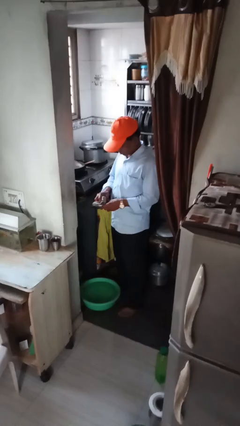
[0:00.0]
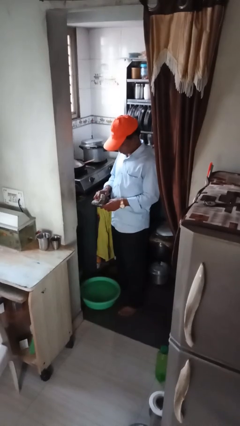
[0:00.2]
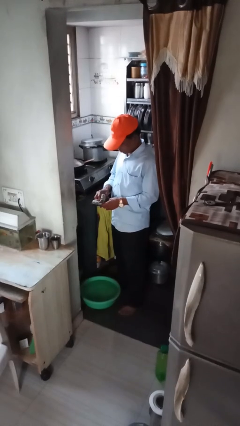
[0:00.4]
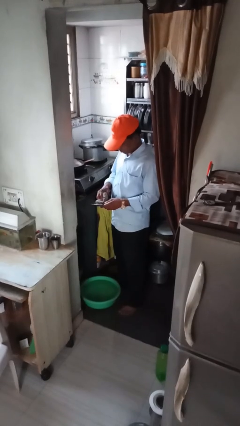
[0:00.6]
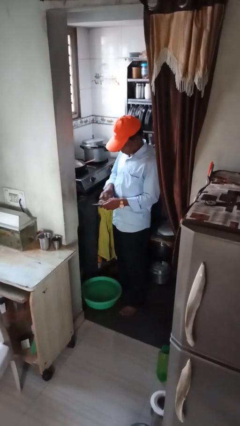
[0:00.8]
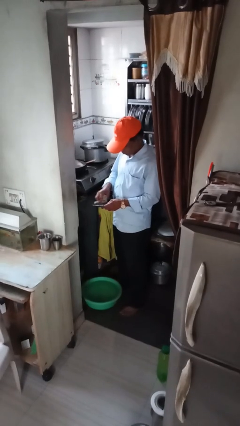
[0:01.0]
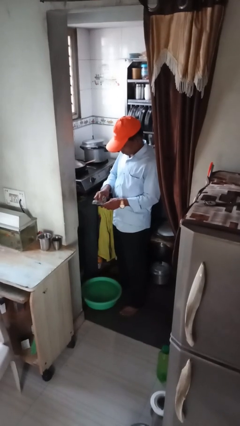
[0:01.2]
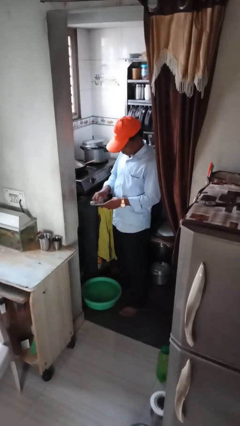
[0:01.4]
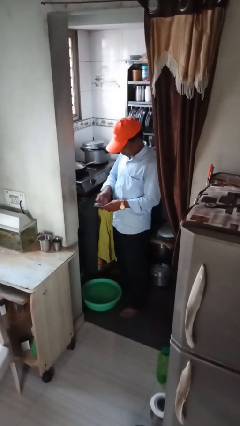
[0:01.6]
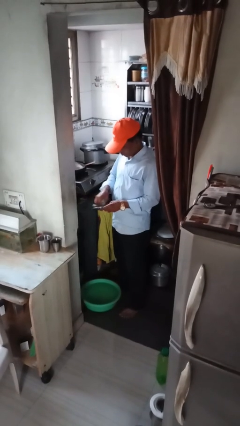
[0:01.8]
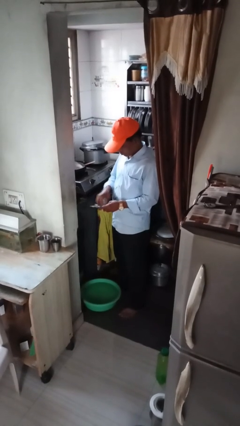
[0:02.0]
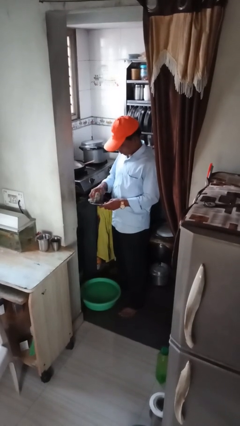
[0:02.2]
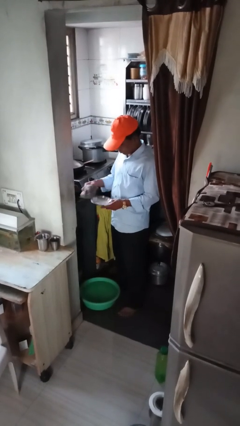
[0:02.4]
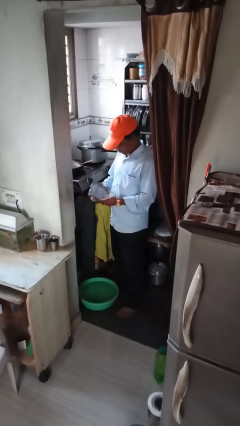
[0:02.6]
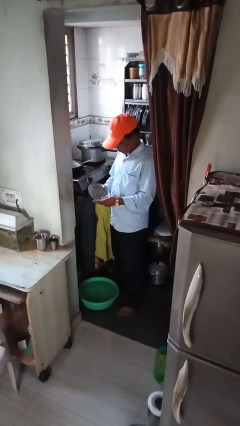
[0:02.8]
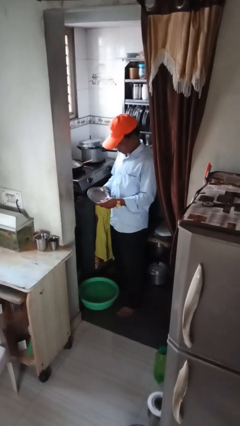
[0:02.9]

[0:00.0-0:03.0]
person dries dish

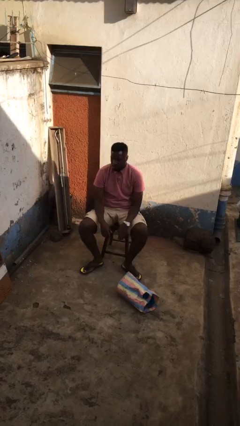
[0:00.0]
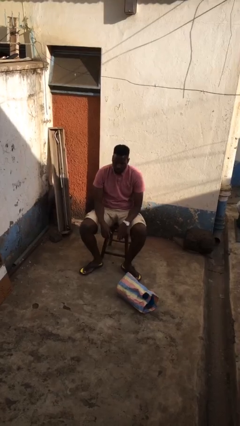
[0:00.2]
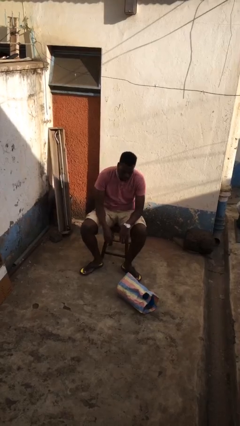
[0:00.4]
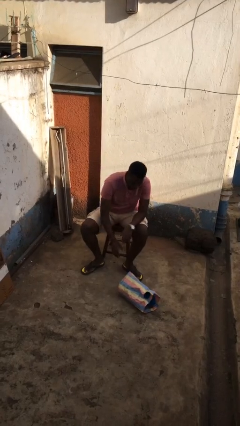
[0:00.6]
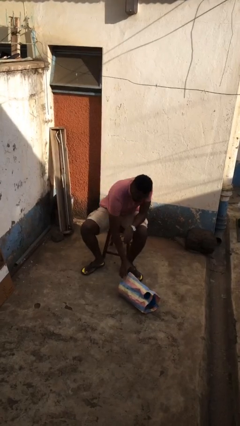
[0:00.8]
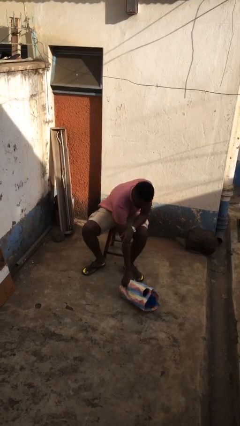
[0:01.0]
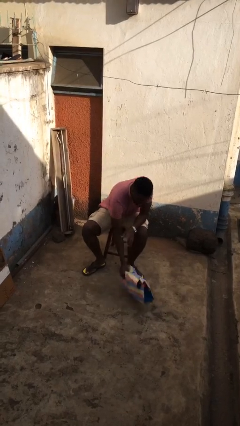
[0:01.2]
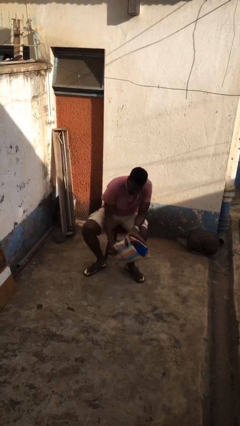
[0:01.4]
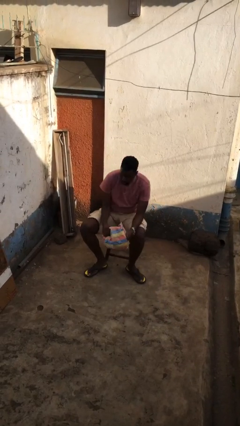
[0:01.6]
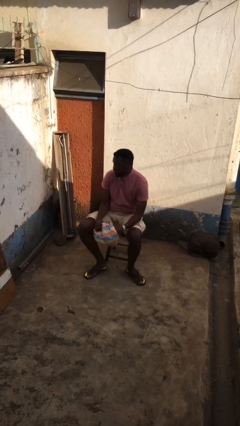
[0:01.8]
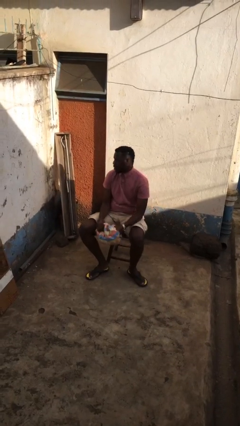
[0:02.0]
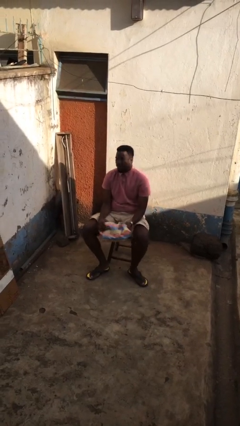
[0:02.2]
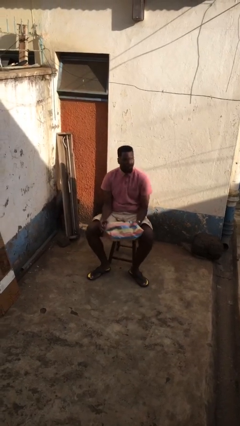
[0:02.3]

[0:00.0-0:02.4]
person picks up object from floor

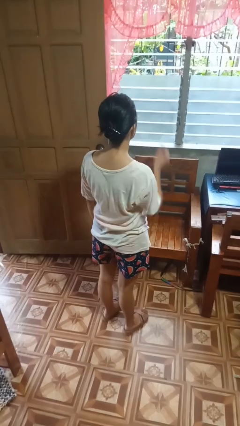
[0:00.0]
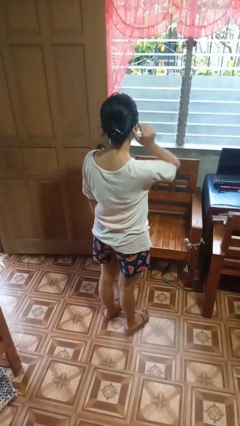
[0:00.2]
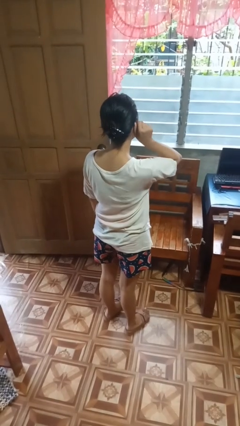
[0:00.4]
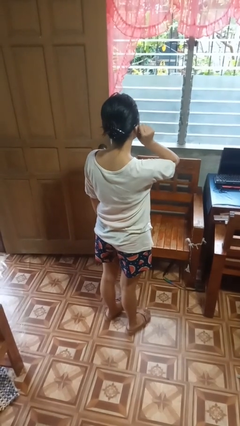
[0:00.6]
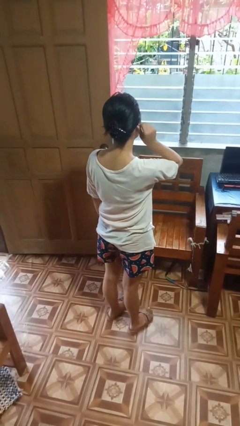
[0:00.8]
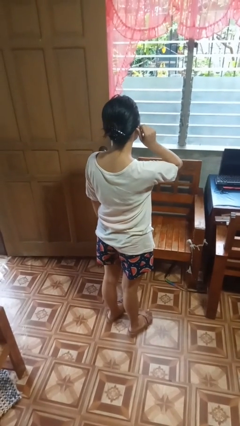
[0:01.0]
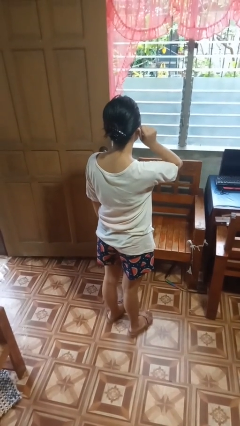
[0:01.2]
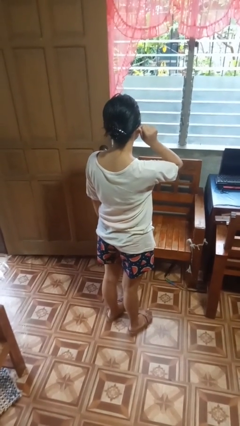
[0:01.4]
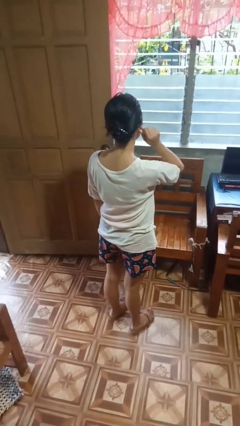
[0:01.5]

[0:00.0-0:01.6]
person touches earlobe

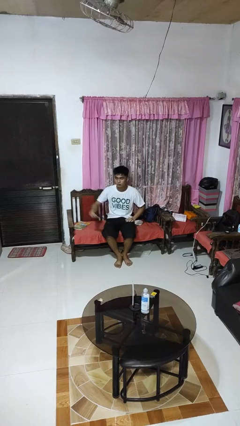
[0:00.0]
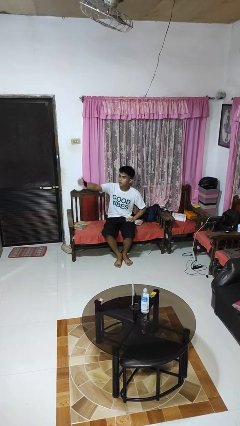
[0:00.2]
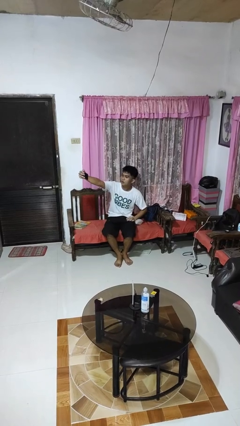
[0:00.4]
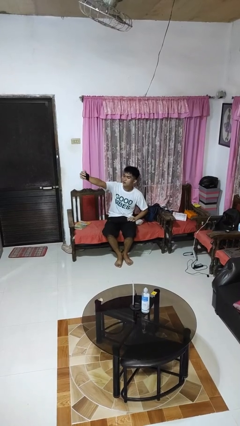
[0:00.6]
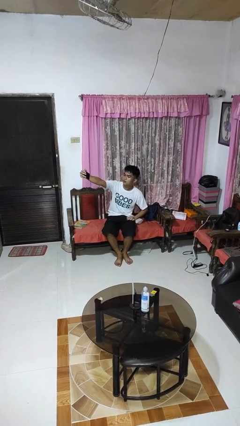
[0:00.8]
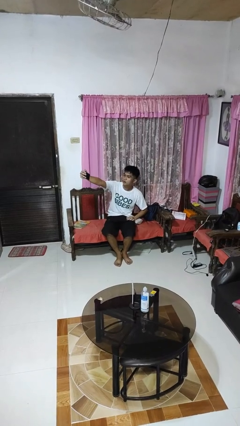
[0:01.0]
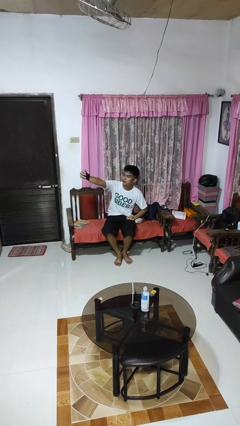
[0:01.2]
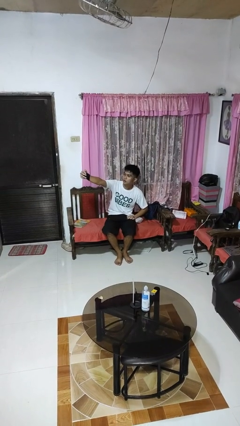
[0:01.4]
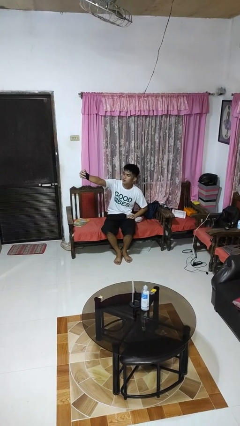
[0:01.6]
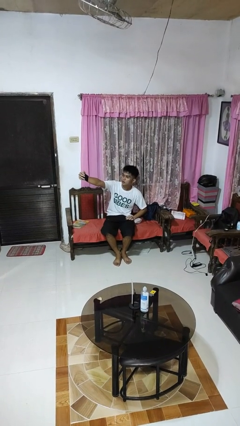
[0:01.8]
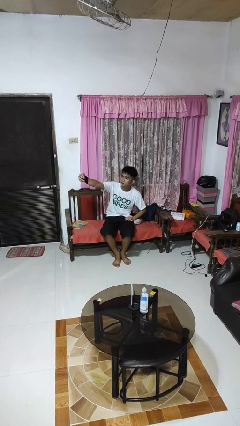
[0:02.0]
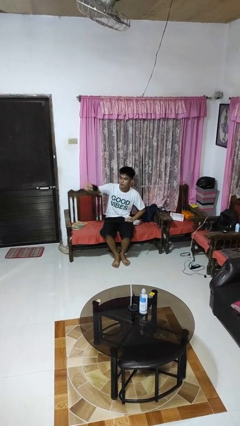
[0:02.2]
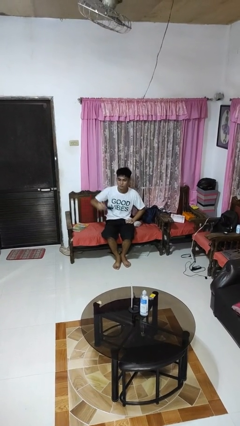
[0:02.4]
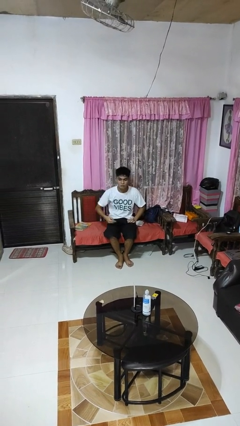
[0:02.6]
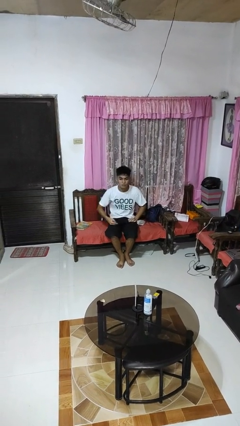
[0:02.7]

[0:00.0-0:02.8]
person takes selfie

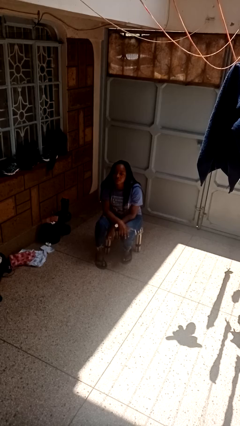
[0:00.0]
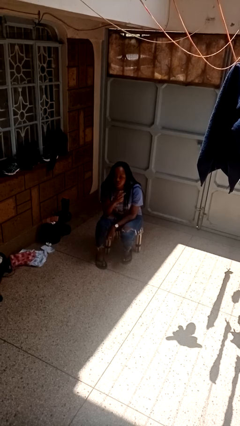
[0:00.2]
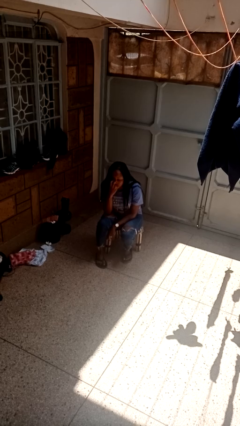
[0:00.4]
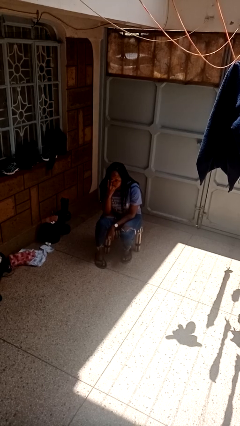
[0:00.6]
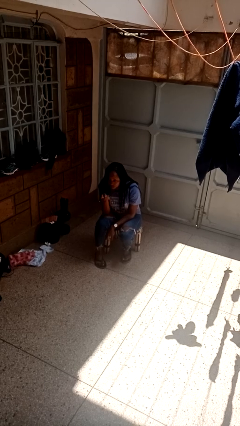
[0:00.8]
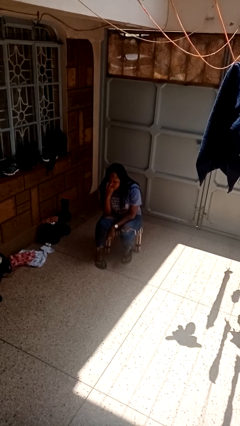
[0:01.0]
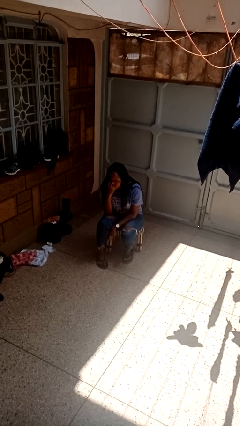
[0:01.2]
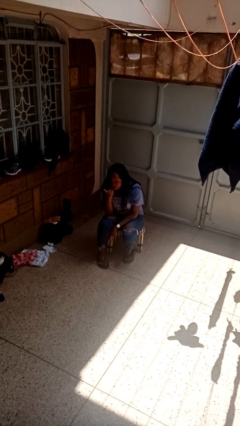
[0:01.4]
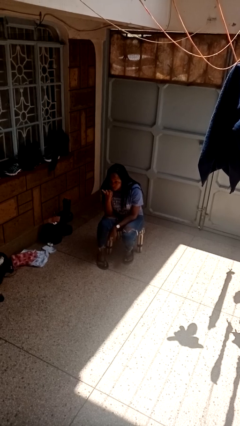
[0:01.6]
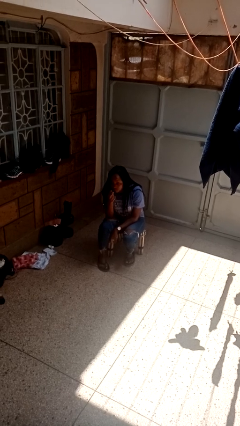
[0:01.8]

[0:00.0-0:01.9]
person gestures watch closely

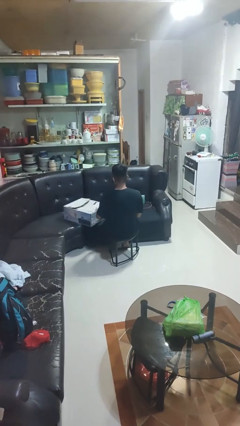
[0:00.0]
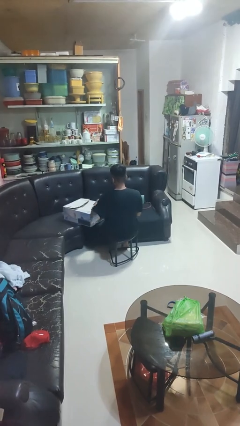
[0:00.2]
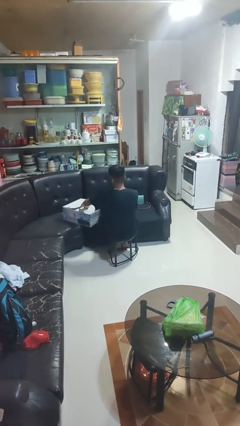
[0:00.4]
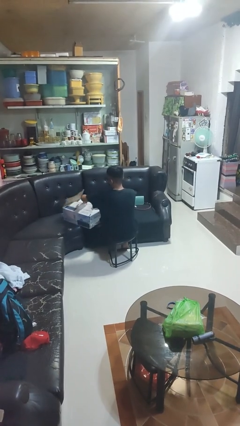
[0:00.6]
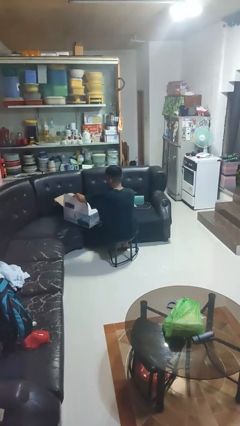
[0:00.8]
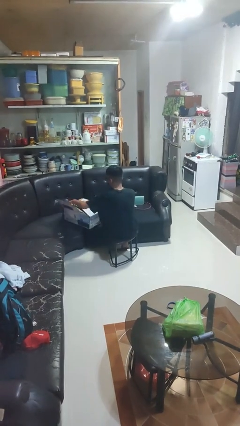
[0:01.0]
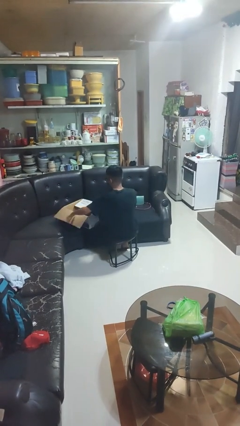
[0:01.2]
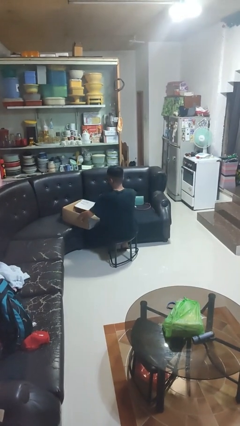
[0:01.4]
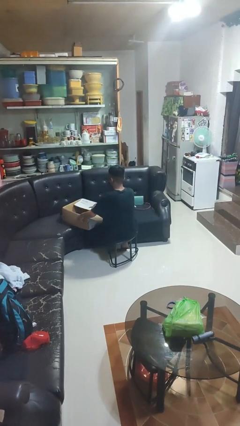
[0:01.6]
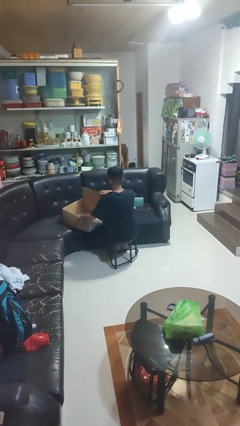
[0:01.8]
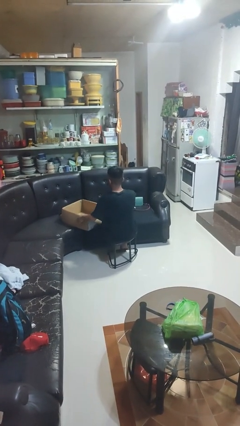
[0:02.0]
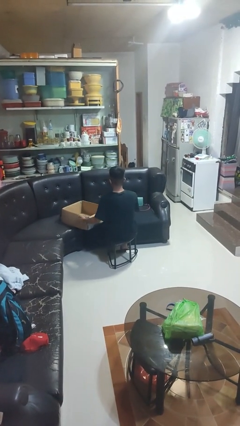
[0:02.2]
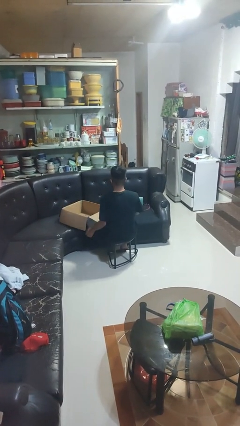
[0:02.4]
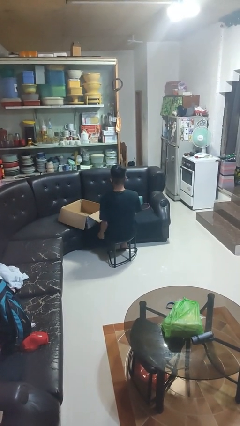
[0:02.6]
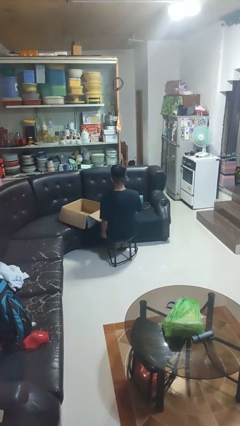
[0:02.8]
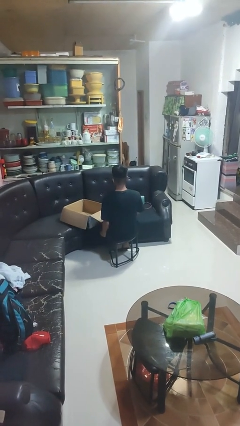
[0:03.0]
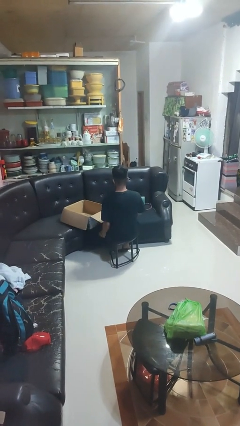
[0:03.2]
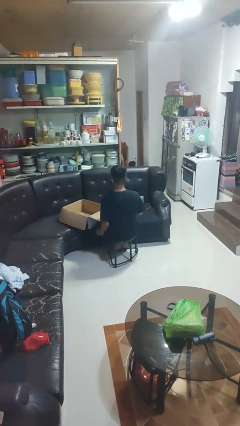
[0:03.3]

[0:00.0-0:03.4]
person opens box

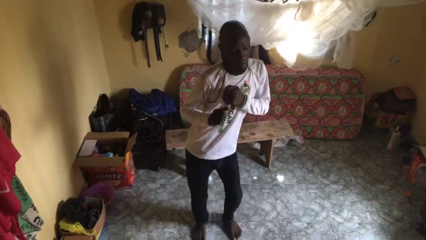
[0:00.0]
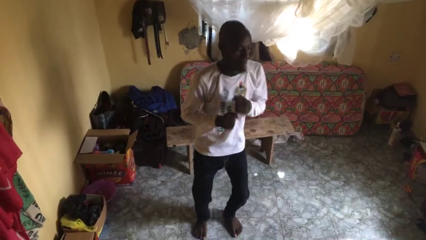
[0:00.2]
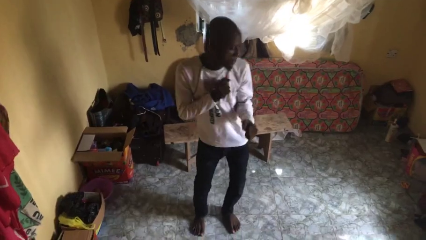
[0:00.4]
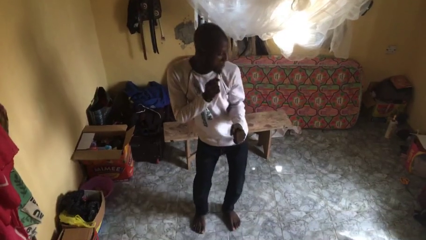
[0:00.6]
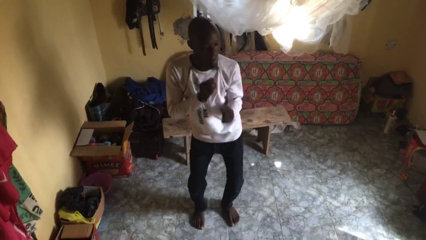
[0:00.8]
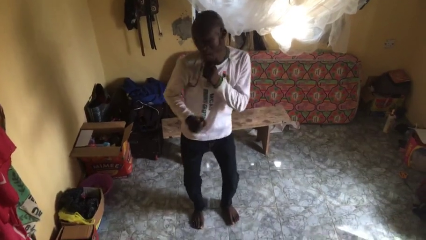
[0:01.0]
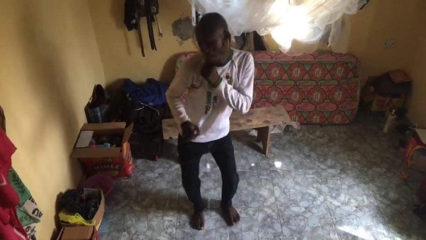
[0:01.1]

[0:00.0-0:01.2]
person dances in place

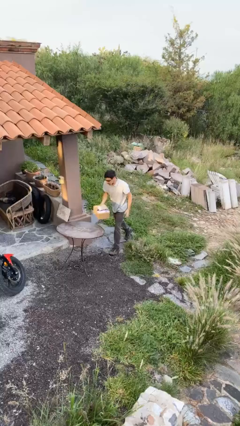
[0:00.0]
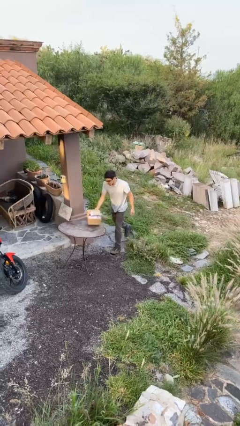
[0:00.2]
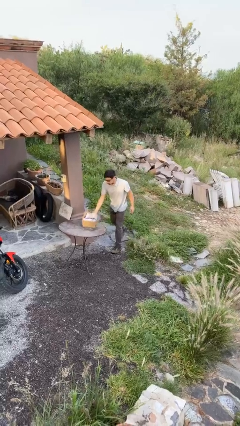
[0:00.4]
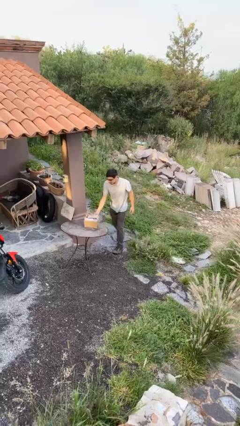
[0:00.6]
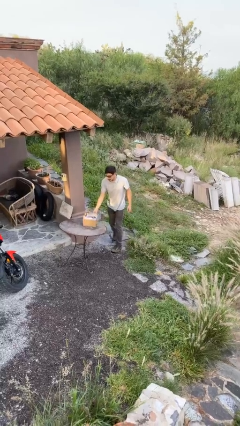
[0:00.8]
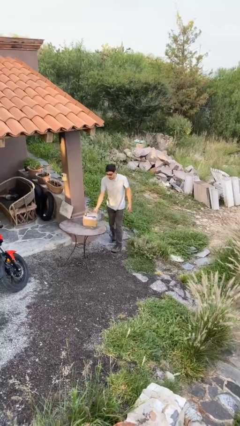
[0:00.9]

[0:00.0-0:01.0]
person puts down object on table
